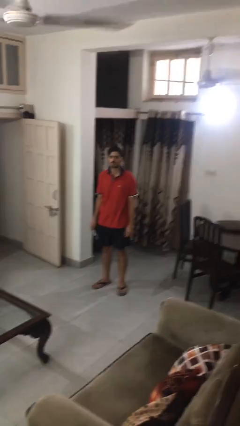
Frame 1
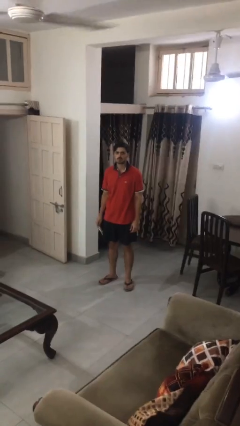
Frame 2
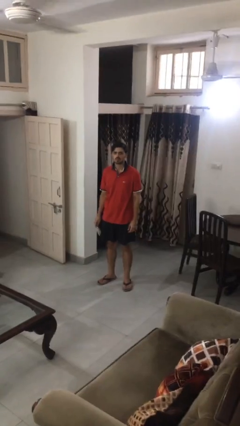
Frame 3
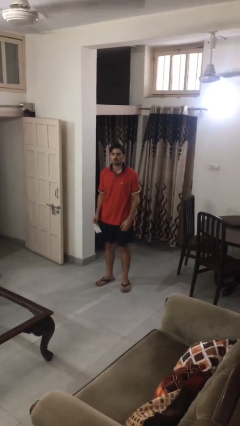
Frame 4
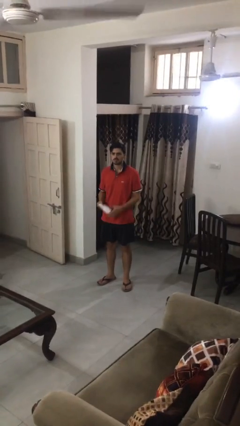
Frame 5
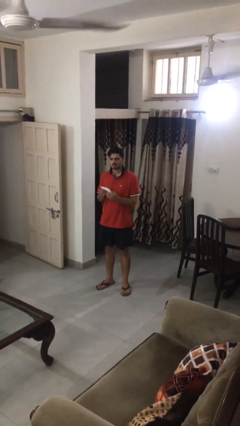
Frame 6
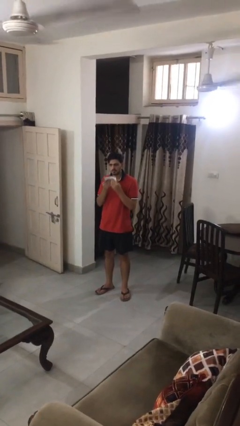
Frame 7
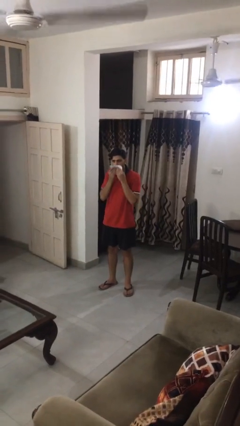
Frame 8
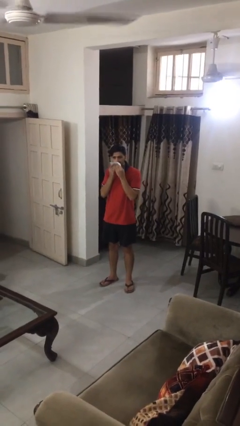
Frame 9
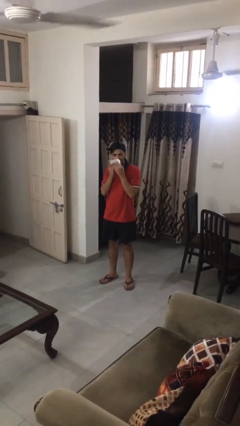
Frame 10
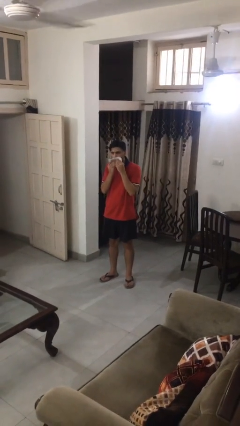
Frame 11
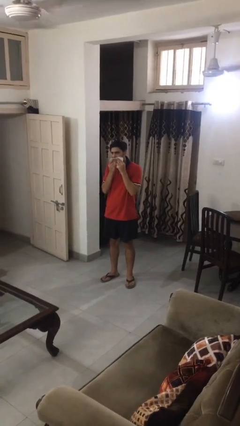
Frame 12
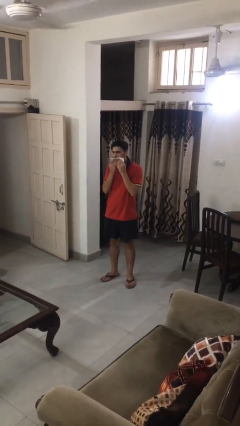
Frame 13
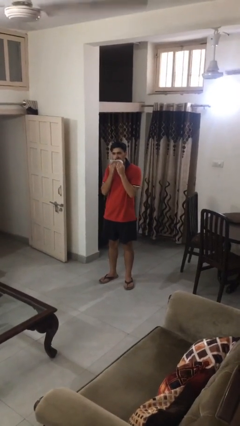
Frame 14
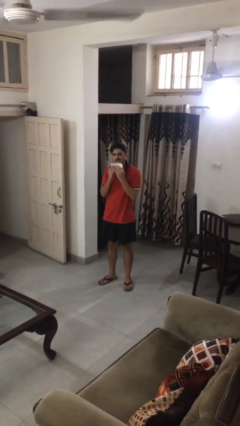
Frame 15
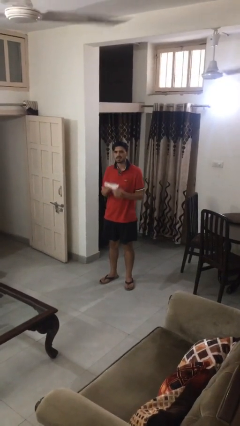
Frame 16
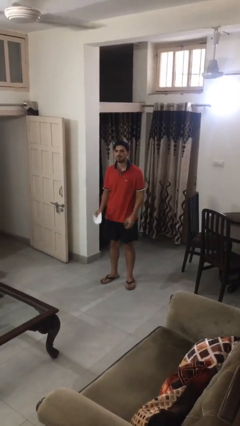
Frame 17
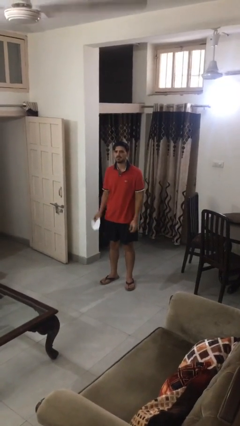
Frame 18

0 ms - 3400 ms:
person wipes mouth with napkin

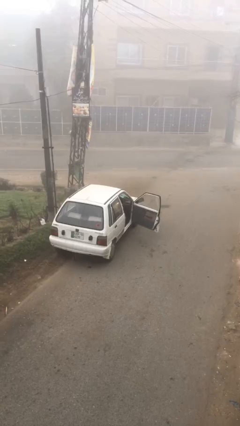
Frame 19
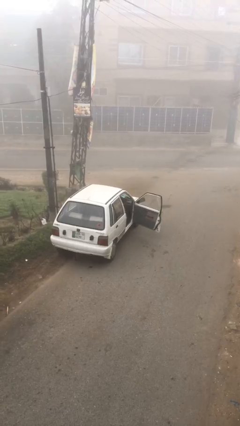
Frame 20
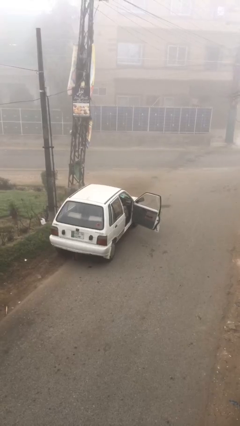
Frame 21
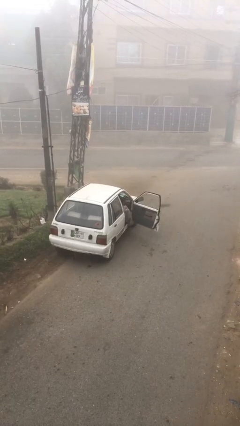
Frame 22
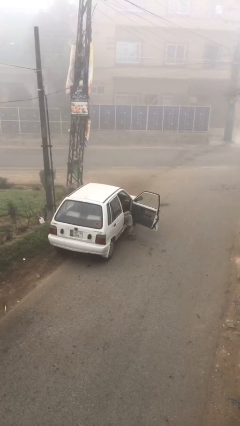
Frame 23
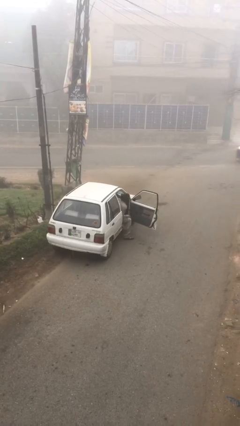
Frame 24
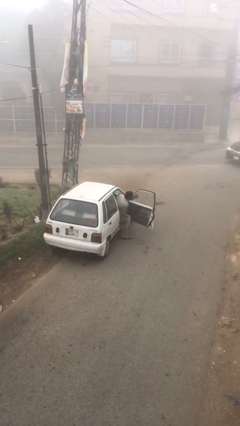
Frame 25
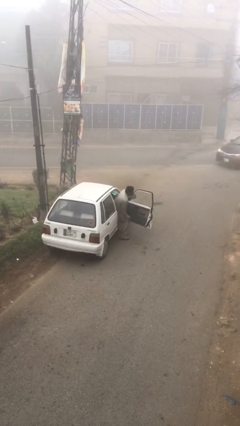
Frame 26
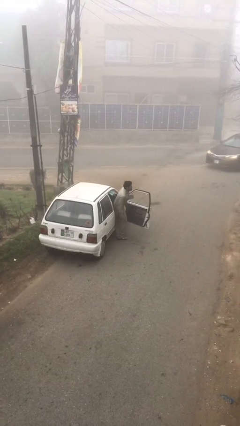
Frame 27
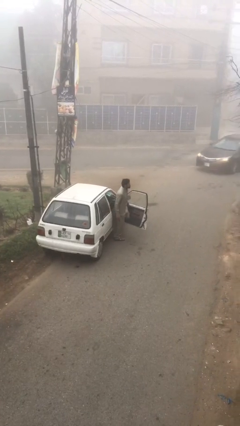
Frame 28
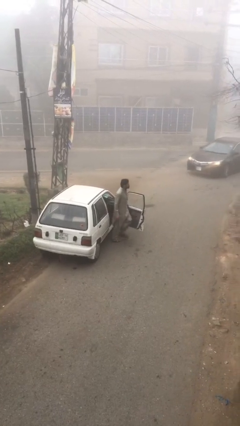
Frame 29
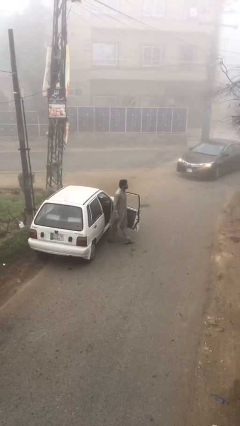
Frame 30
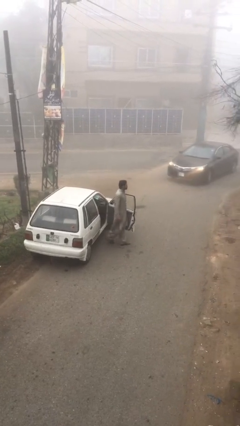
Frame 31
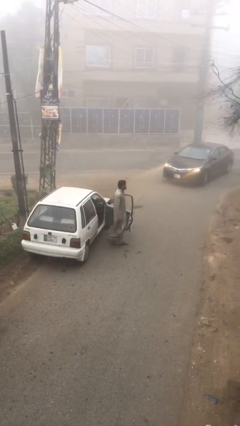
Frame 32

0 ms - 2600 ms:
person exits car

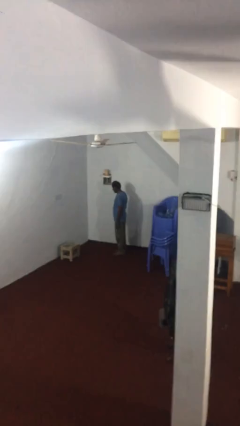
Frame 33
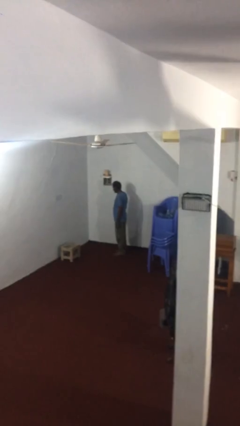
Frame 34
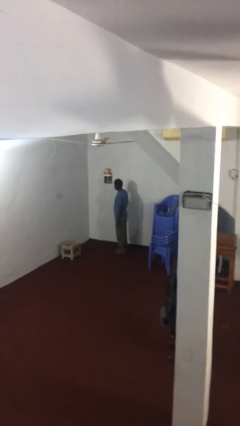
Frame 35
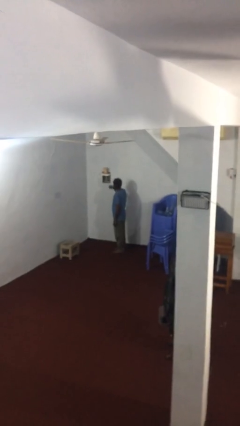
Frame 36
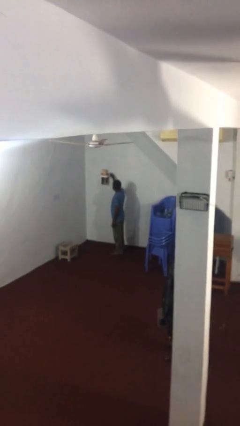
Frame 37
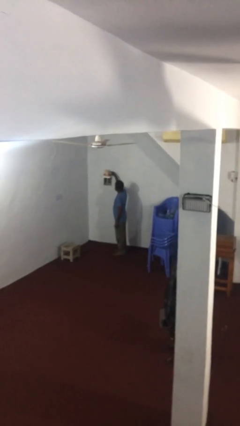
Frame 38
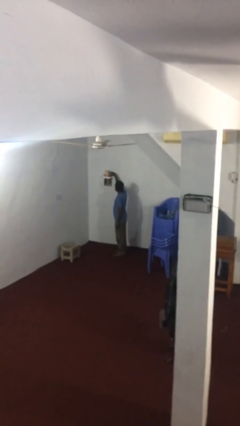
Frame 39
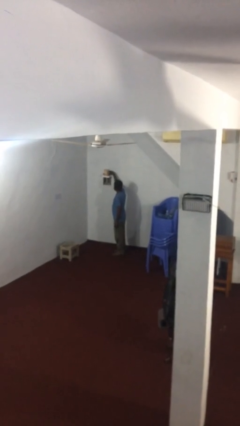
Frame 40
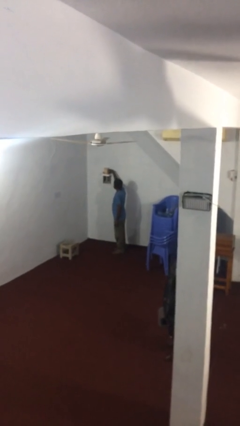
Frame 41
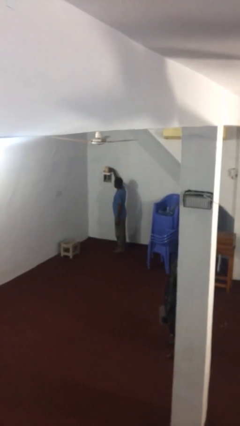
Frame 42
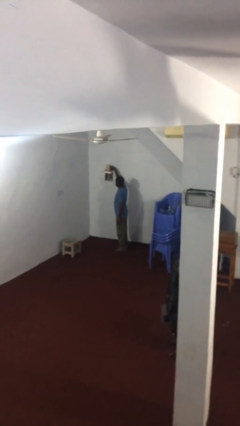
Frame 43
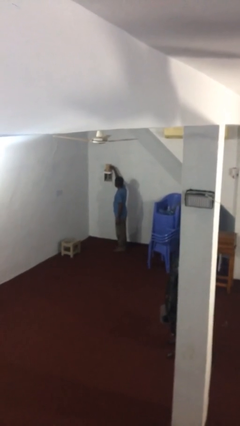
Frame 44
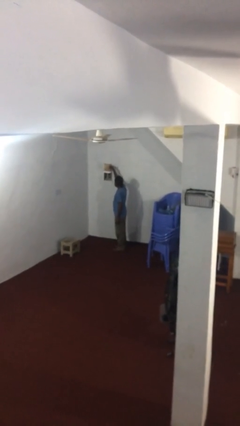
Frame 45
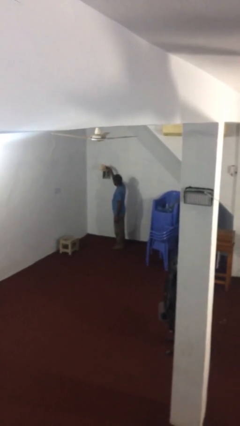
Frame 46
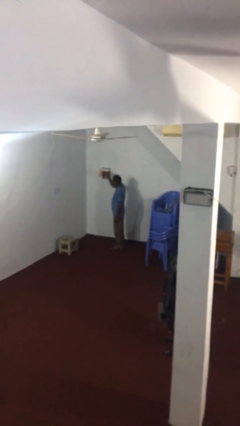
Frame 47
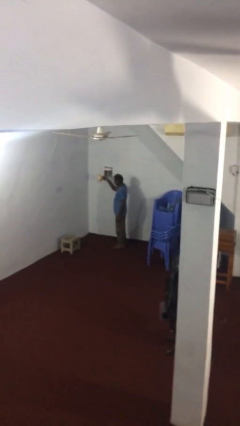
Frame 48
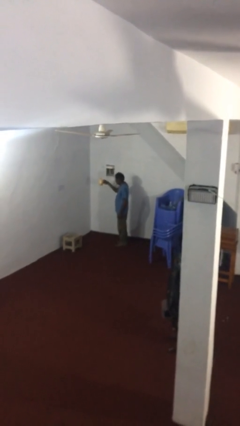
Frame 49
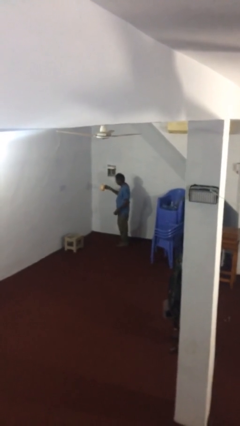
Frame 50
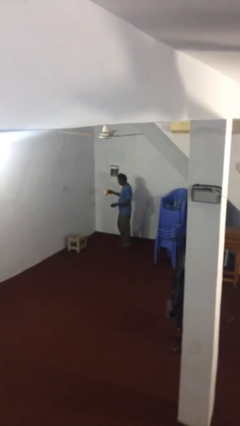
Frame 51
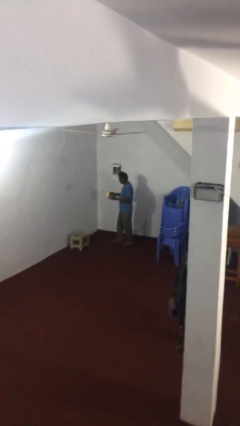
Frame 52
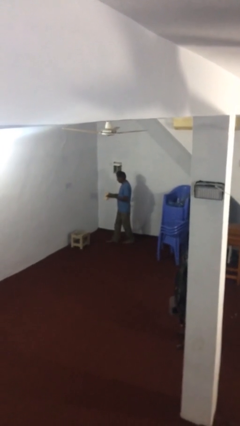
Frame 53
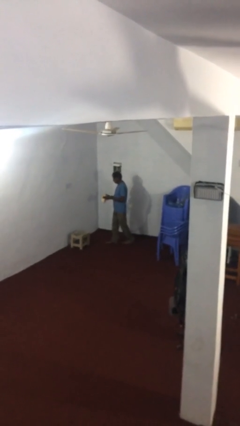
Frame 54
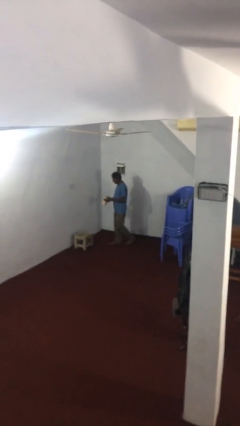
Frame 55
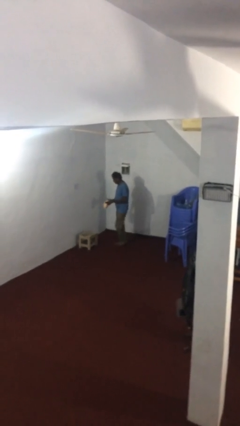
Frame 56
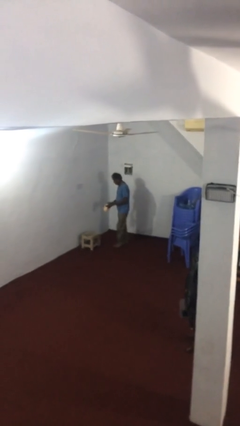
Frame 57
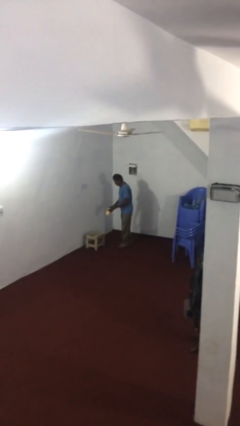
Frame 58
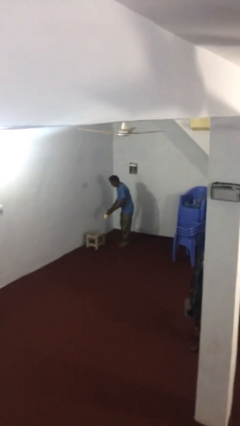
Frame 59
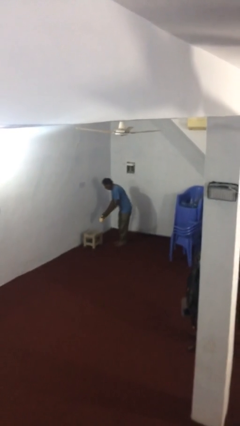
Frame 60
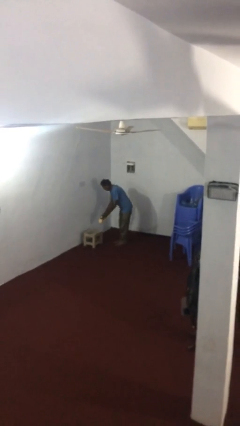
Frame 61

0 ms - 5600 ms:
person picks up object from shelf

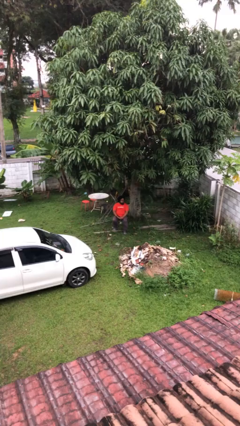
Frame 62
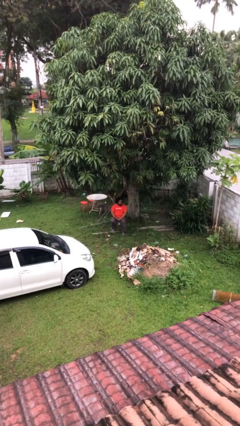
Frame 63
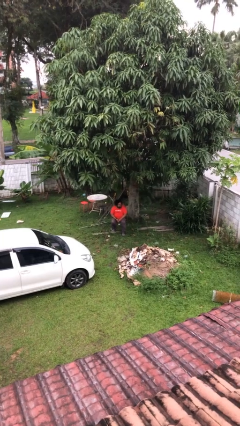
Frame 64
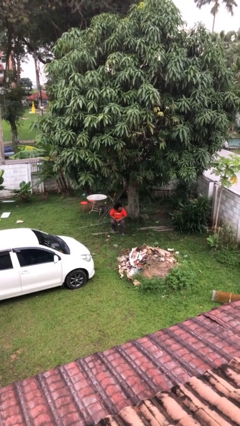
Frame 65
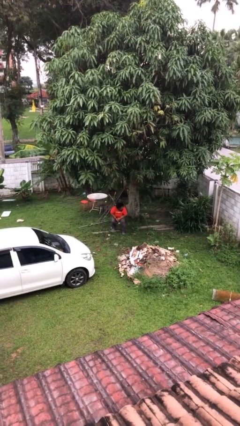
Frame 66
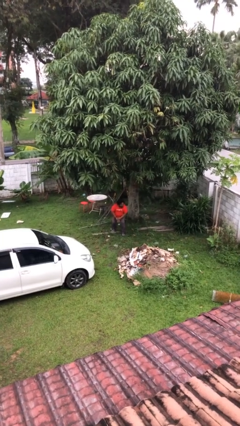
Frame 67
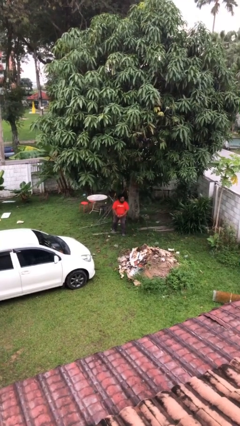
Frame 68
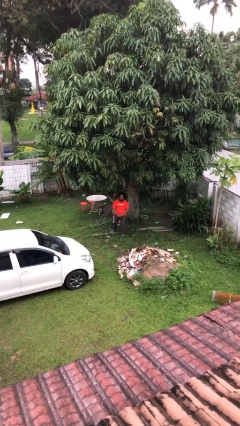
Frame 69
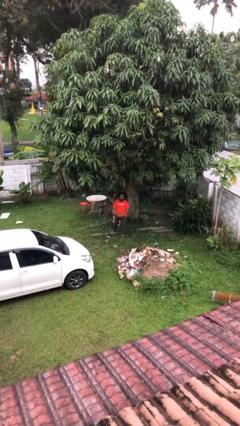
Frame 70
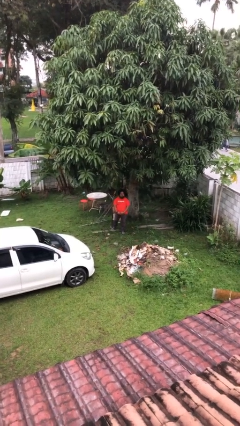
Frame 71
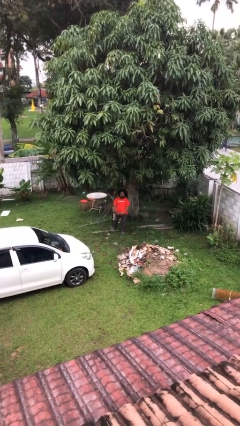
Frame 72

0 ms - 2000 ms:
person stands up

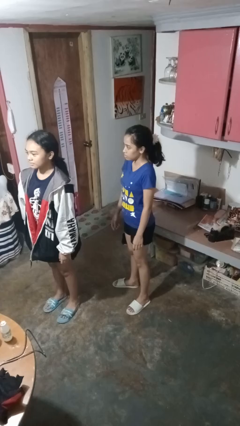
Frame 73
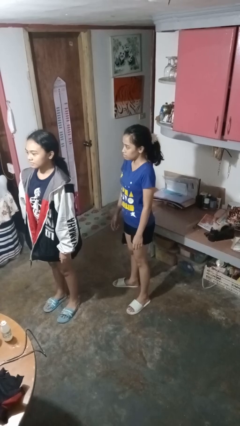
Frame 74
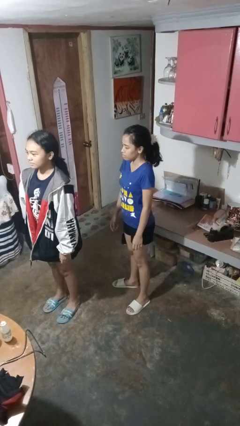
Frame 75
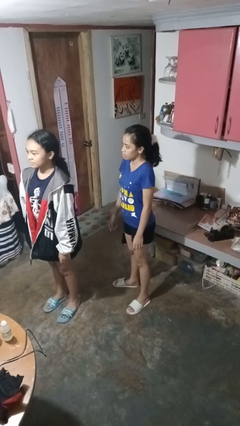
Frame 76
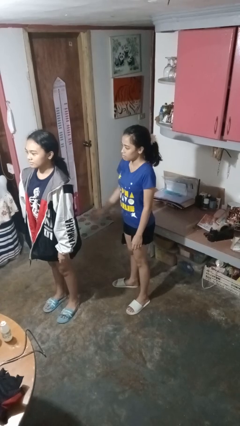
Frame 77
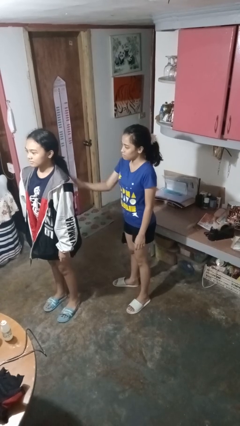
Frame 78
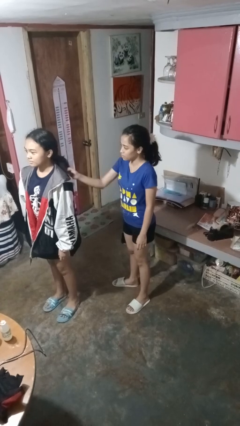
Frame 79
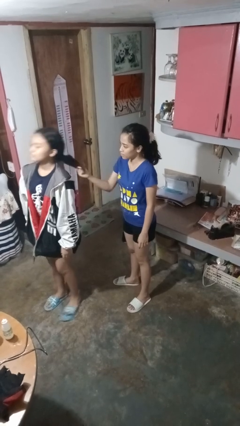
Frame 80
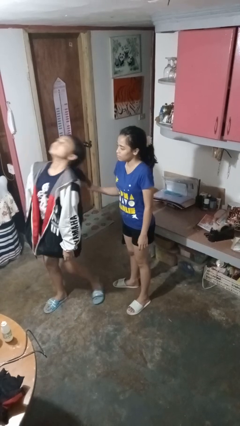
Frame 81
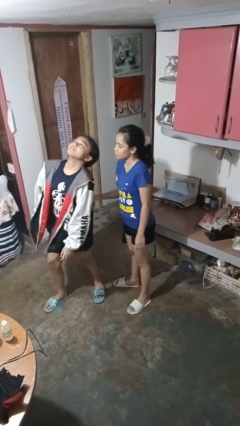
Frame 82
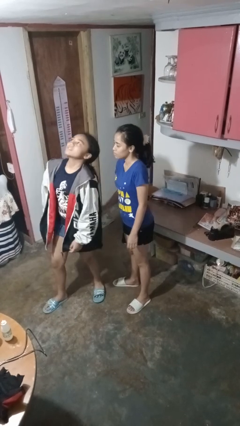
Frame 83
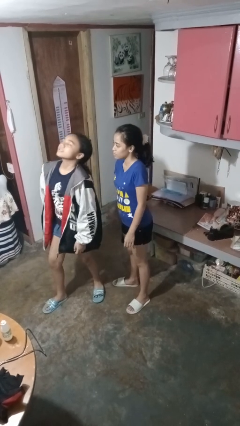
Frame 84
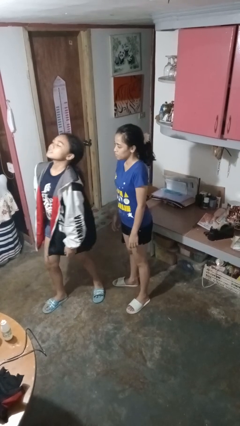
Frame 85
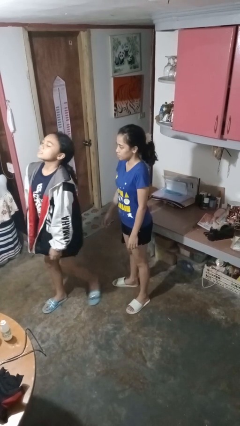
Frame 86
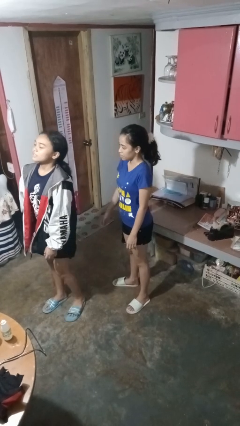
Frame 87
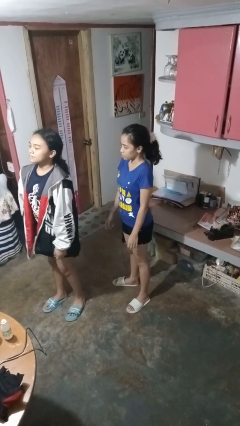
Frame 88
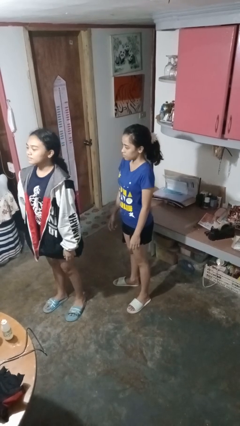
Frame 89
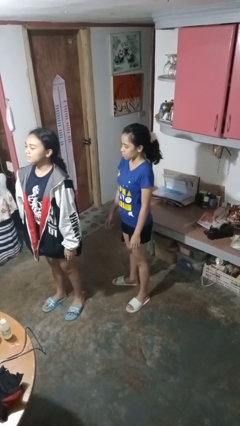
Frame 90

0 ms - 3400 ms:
person grabs person by hair
